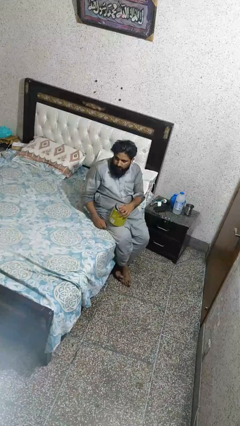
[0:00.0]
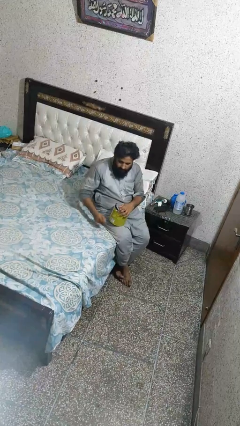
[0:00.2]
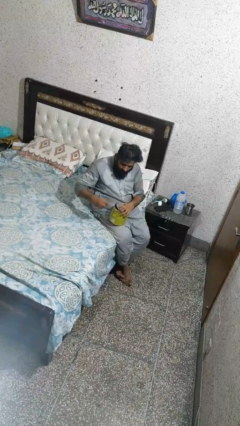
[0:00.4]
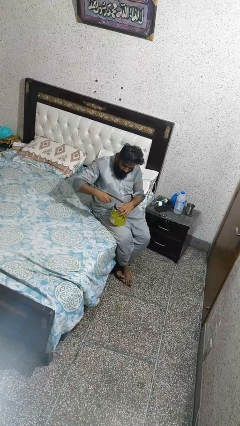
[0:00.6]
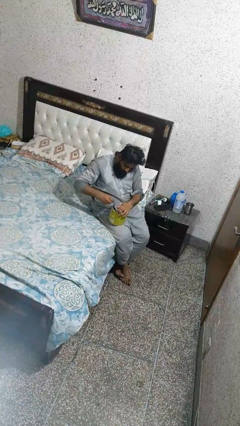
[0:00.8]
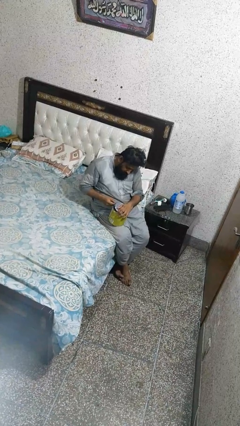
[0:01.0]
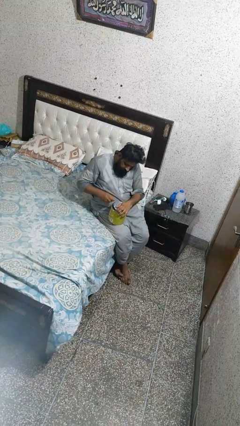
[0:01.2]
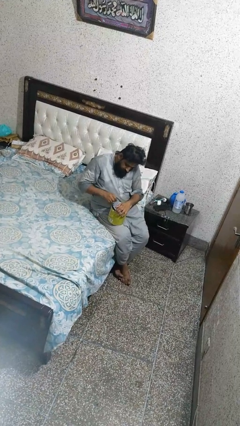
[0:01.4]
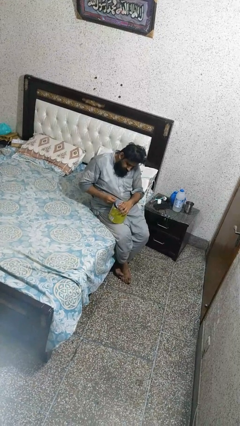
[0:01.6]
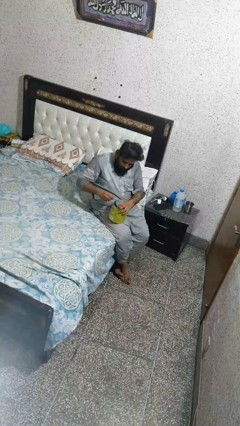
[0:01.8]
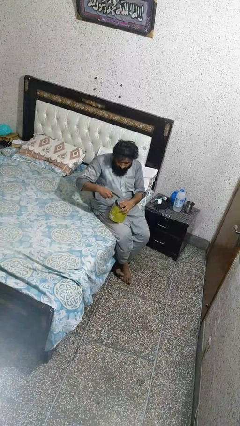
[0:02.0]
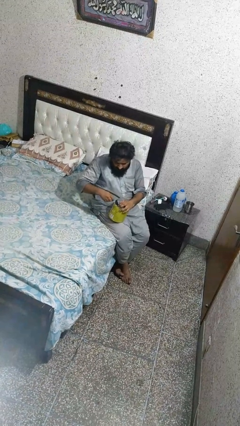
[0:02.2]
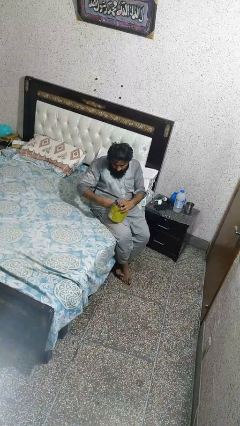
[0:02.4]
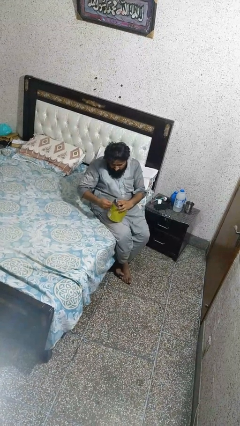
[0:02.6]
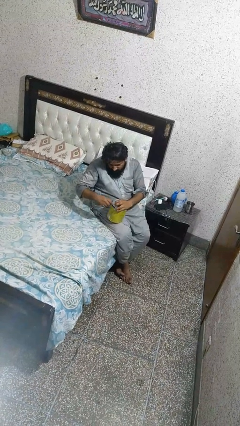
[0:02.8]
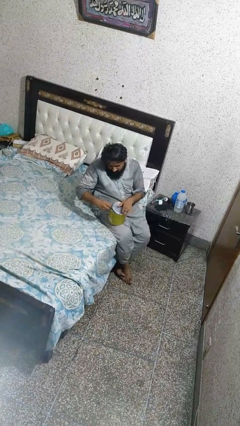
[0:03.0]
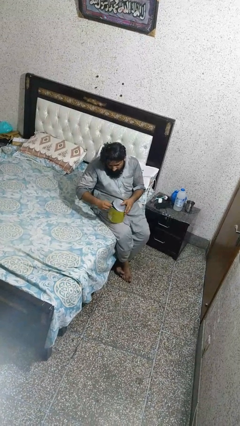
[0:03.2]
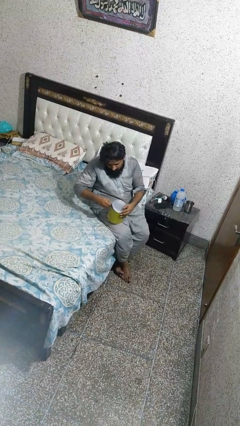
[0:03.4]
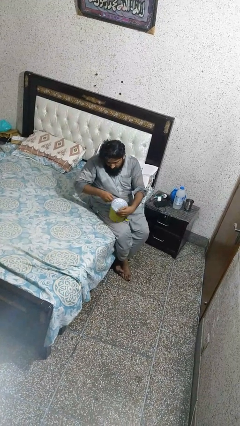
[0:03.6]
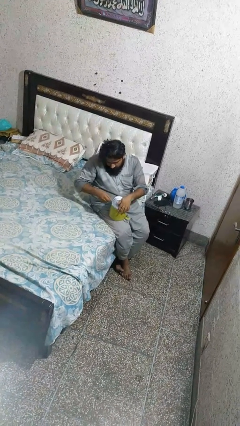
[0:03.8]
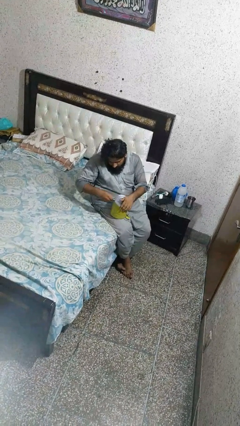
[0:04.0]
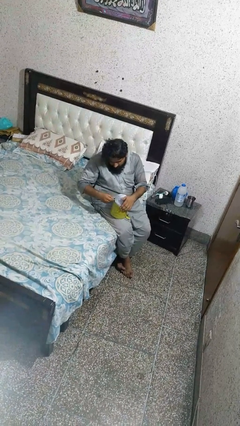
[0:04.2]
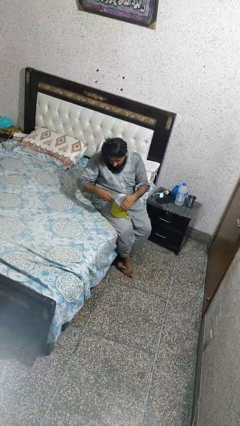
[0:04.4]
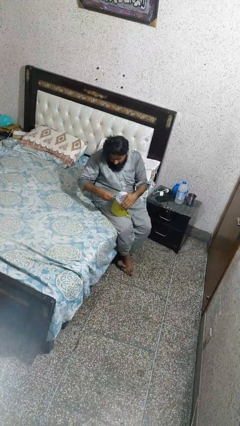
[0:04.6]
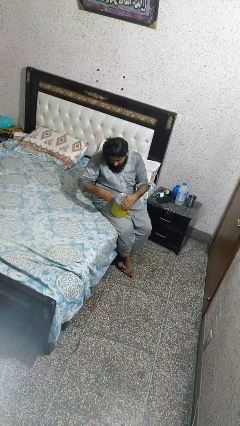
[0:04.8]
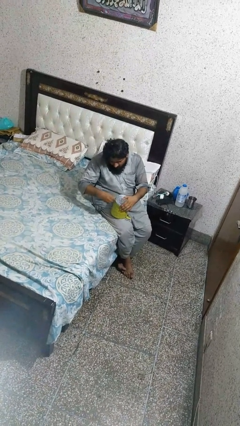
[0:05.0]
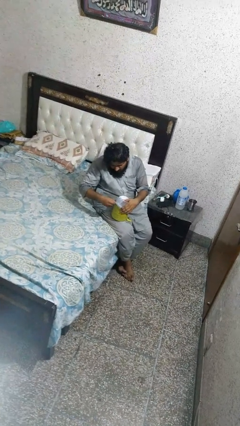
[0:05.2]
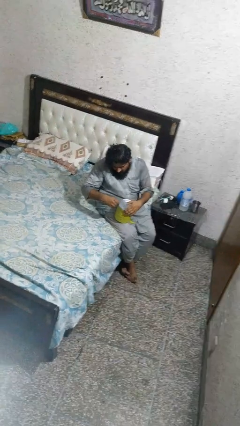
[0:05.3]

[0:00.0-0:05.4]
person opens can with can opener

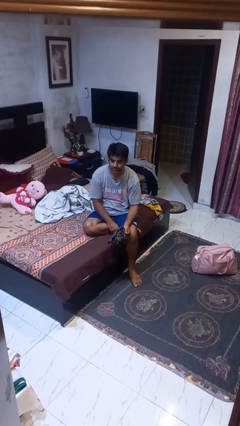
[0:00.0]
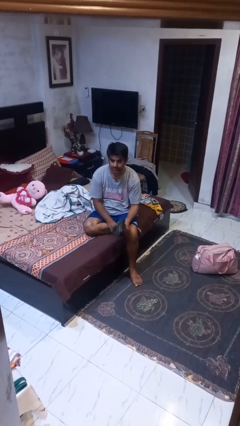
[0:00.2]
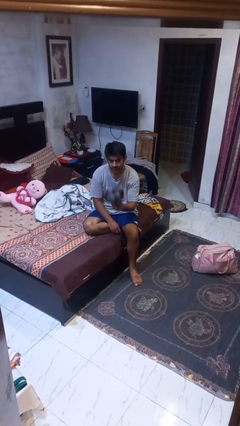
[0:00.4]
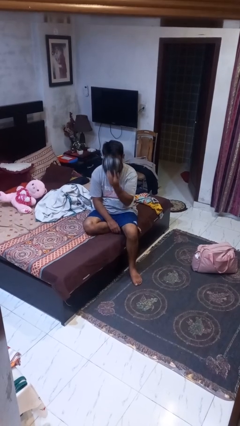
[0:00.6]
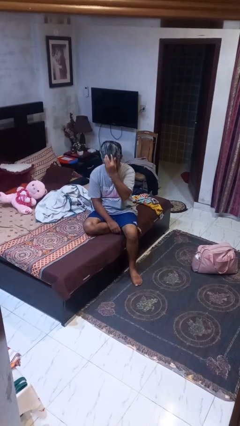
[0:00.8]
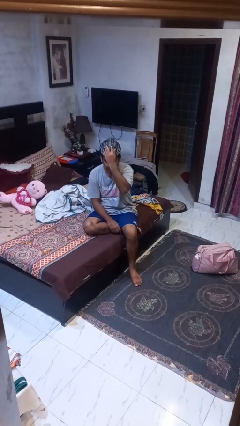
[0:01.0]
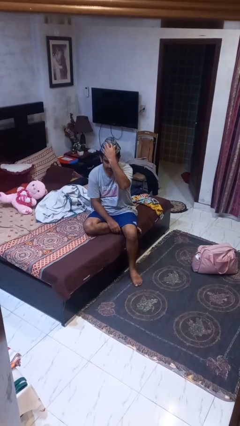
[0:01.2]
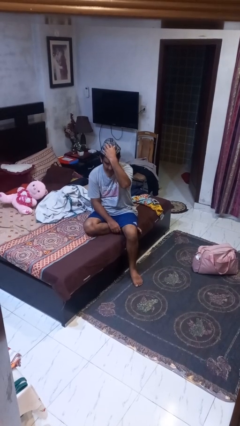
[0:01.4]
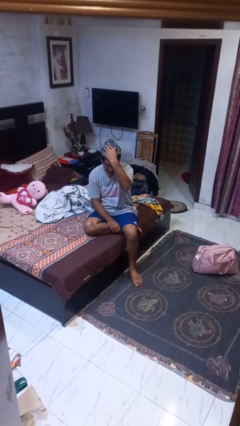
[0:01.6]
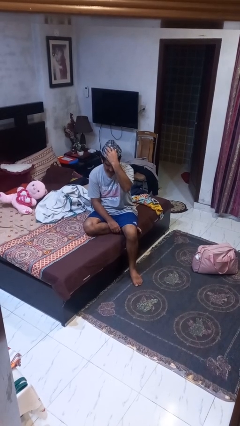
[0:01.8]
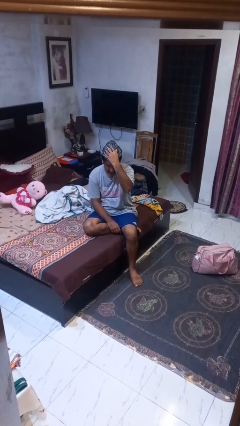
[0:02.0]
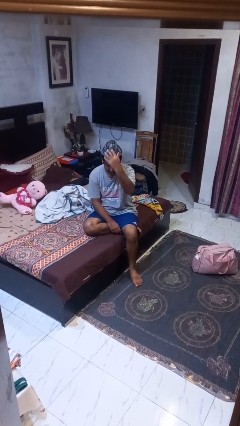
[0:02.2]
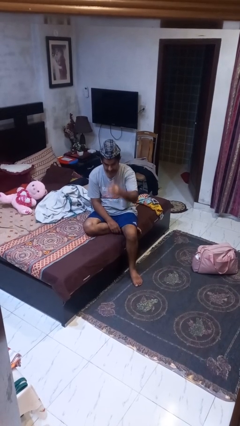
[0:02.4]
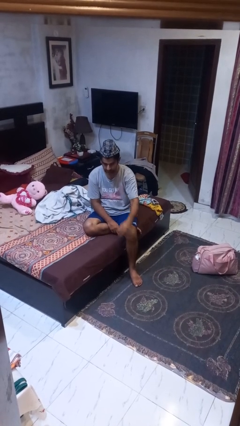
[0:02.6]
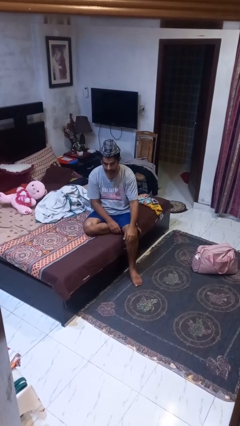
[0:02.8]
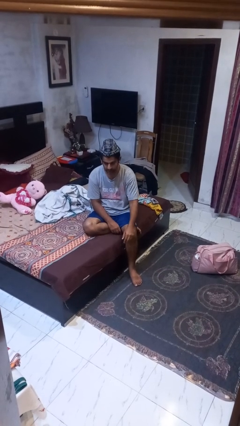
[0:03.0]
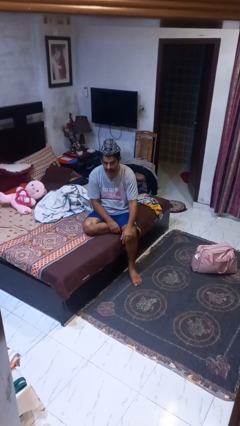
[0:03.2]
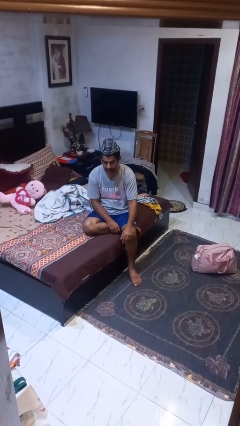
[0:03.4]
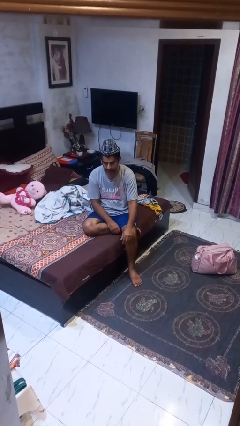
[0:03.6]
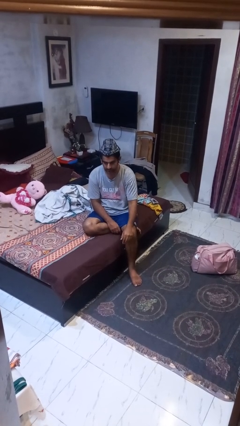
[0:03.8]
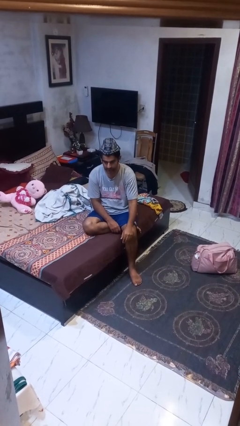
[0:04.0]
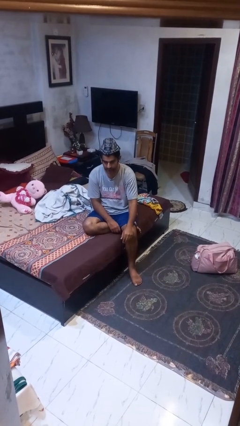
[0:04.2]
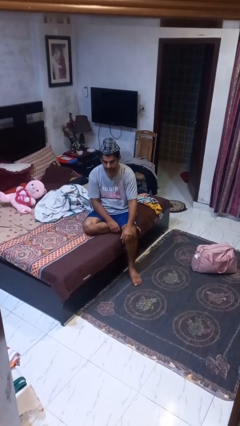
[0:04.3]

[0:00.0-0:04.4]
person puts on hat

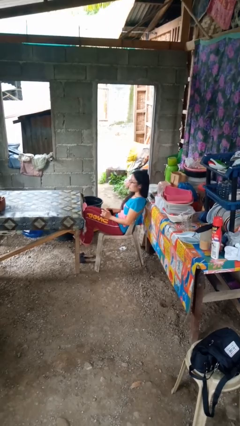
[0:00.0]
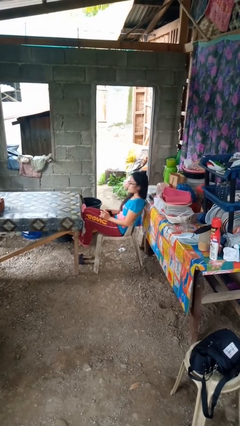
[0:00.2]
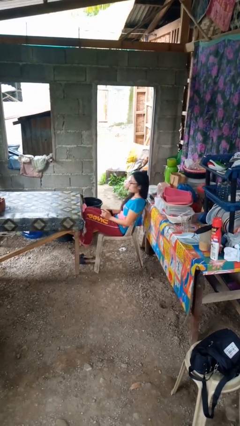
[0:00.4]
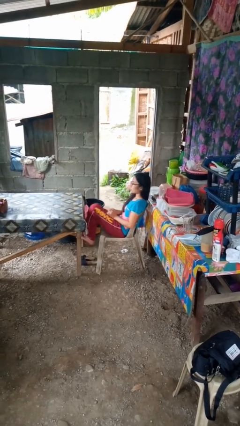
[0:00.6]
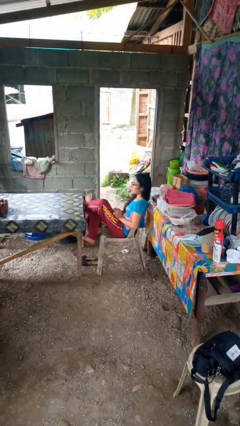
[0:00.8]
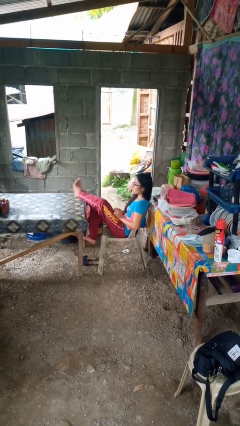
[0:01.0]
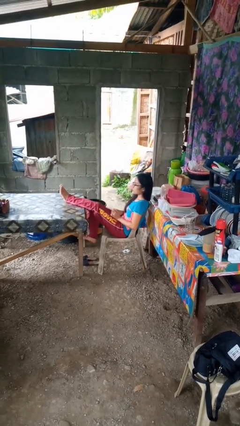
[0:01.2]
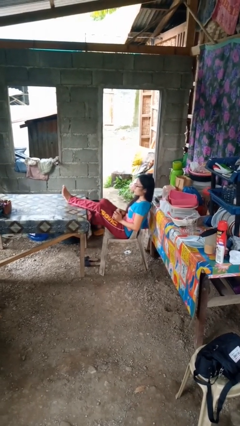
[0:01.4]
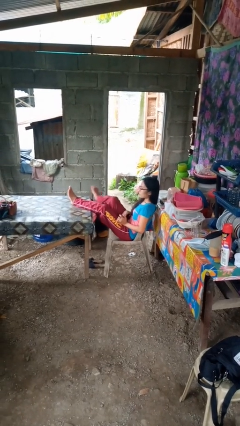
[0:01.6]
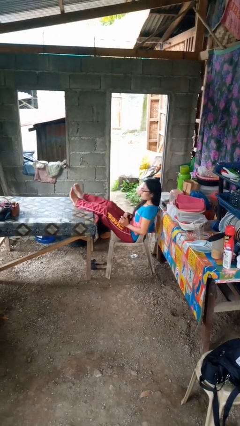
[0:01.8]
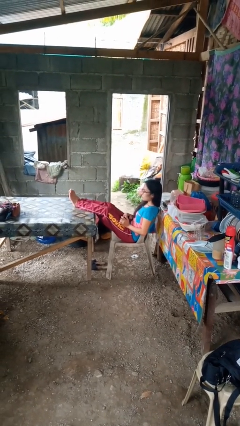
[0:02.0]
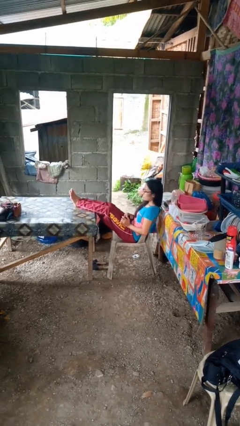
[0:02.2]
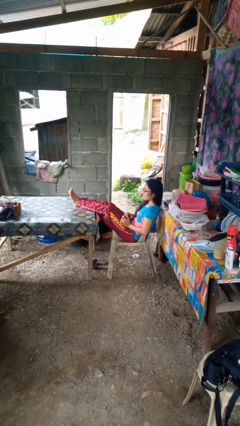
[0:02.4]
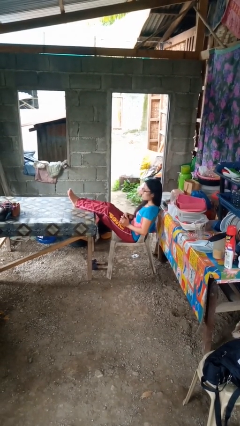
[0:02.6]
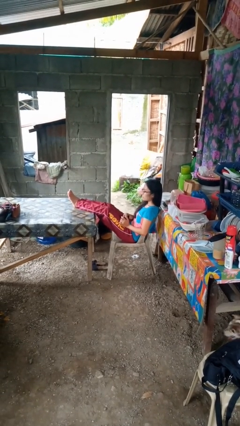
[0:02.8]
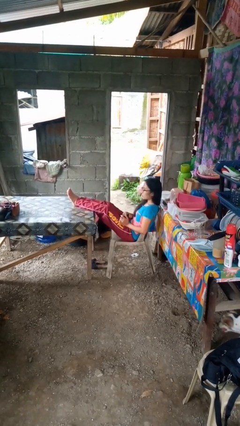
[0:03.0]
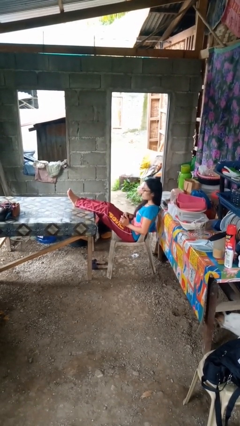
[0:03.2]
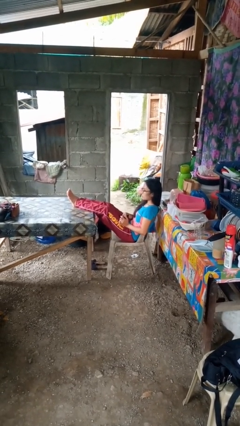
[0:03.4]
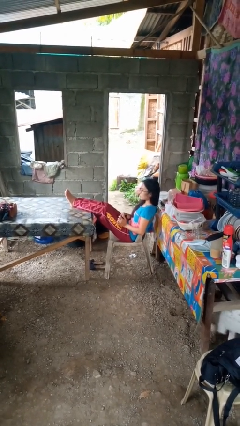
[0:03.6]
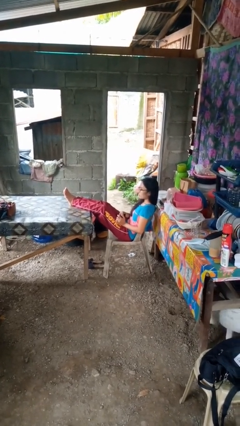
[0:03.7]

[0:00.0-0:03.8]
person puts feet up

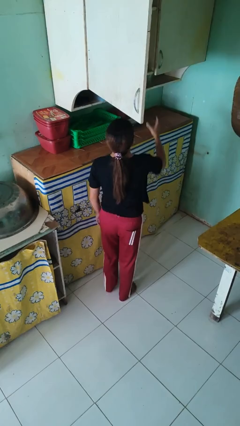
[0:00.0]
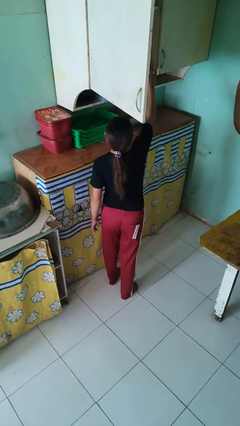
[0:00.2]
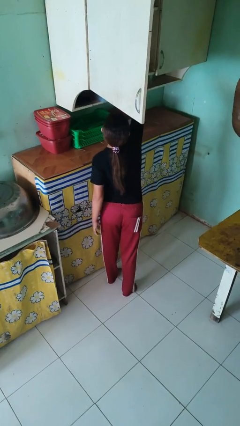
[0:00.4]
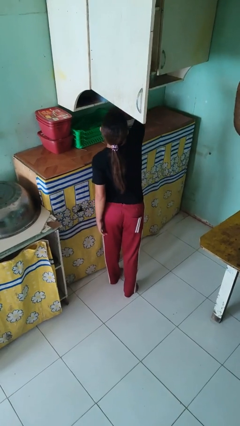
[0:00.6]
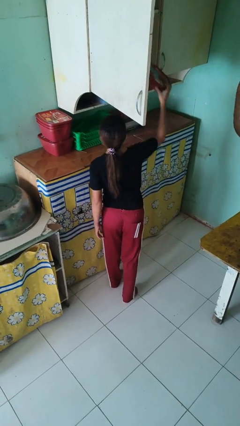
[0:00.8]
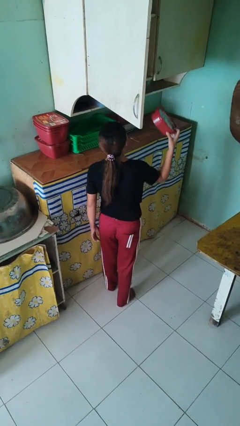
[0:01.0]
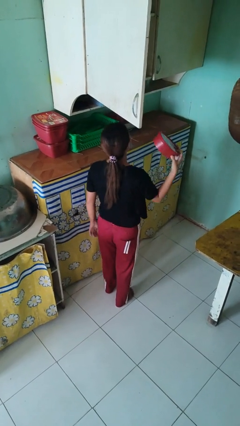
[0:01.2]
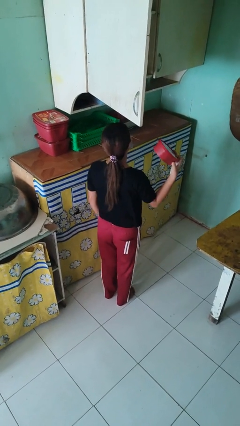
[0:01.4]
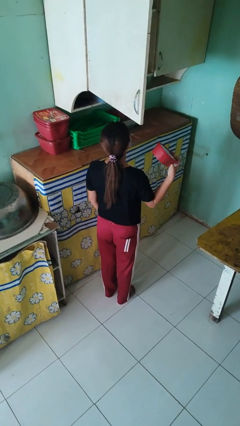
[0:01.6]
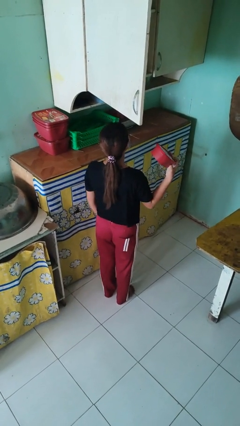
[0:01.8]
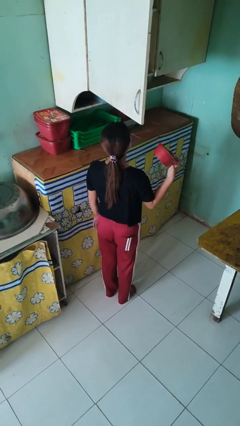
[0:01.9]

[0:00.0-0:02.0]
person takes object from cabinet

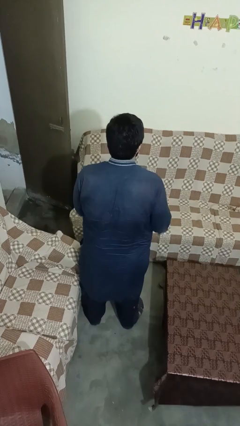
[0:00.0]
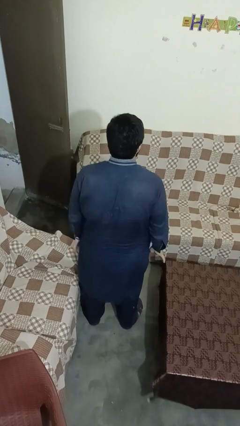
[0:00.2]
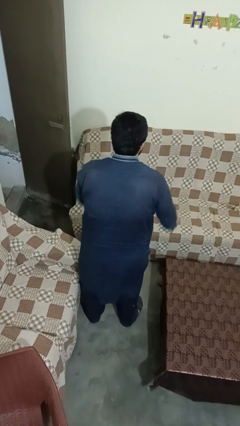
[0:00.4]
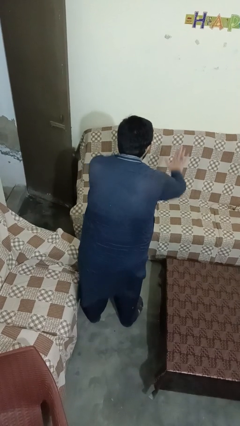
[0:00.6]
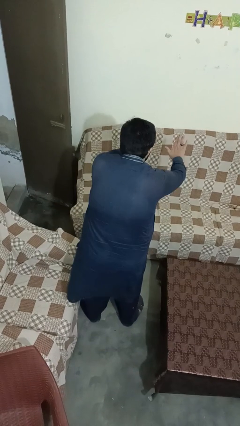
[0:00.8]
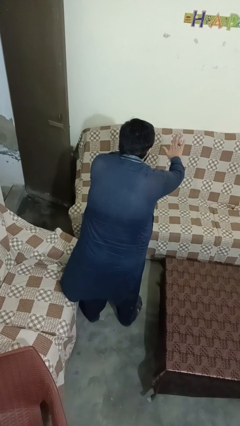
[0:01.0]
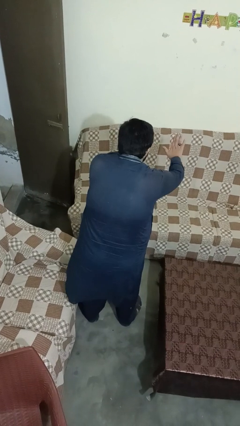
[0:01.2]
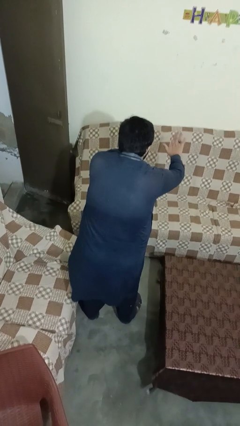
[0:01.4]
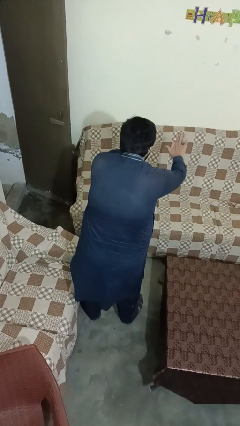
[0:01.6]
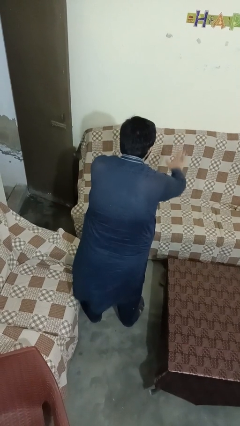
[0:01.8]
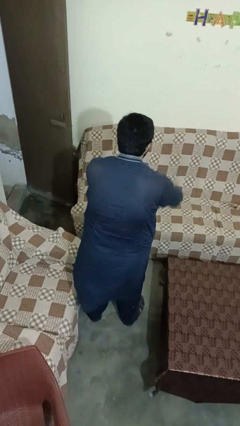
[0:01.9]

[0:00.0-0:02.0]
person gestures stop
